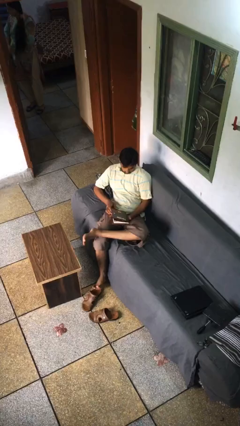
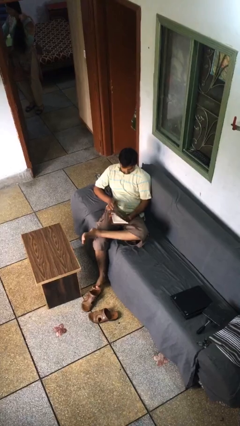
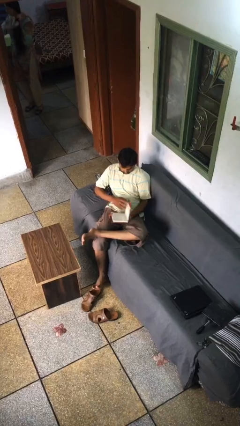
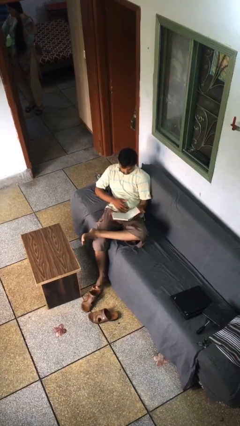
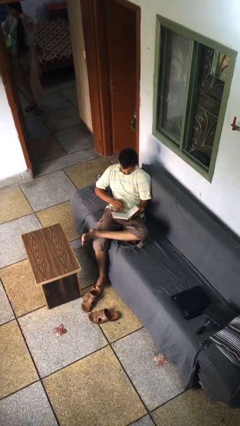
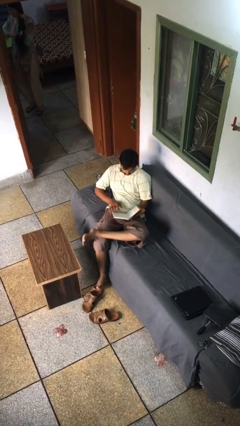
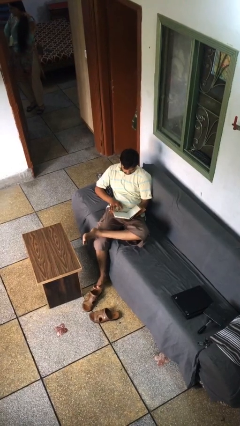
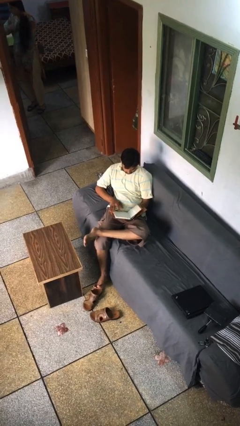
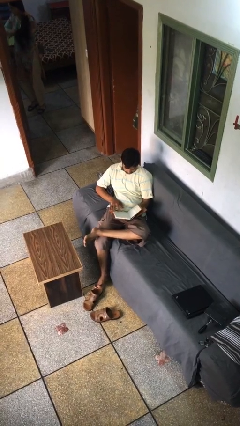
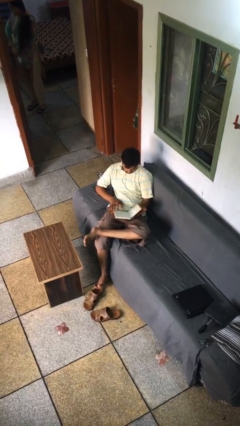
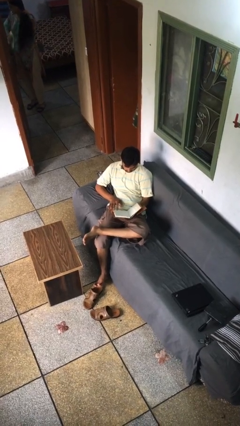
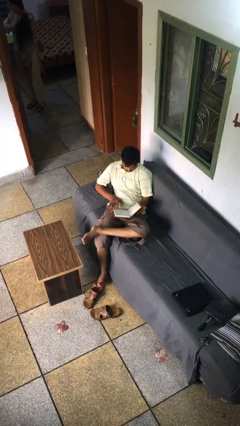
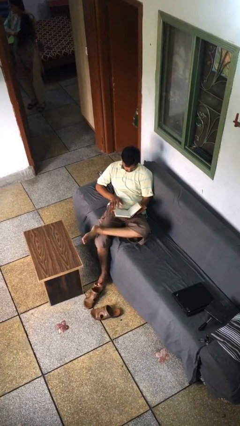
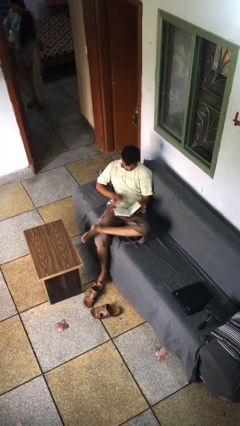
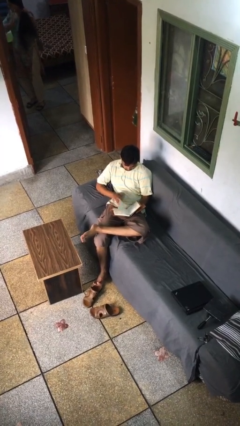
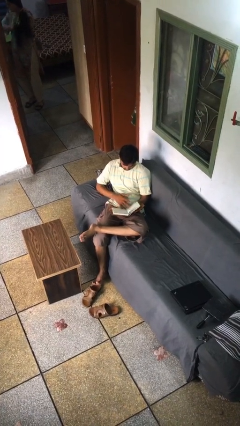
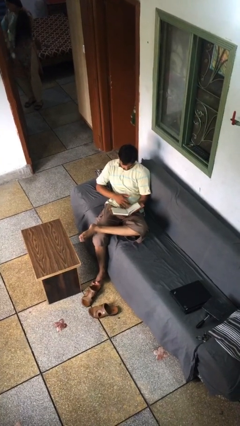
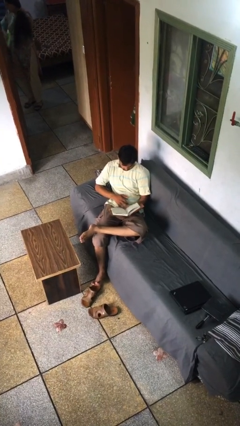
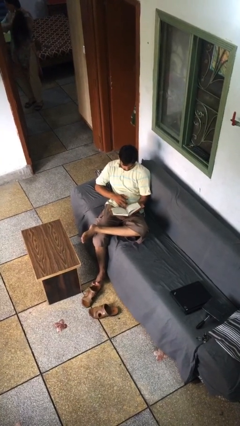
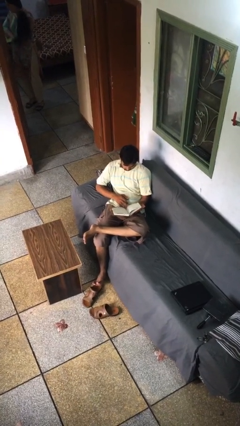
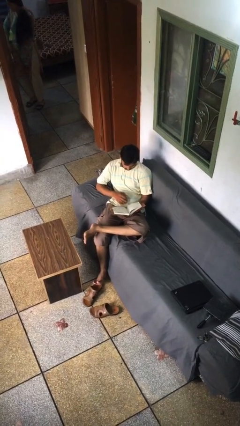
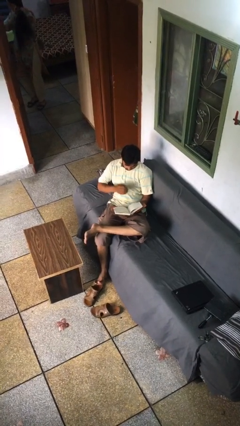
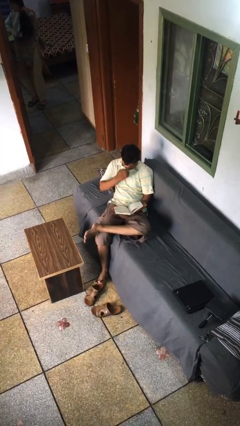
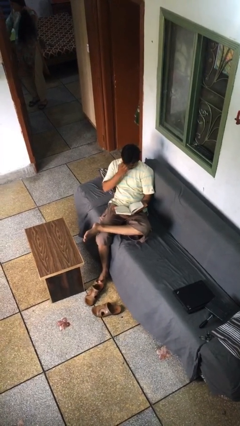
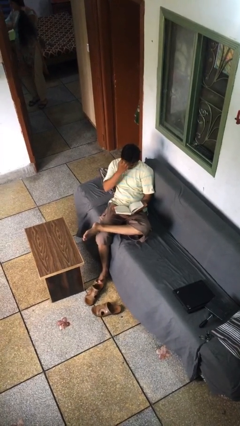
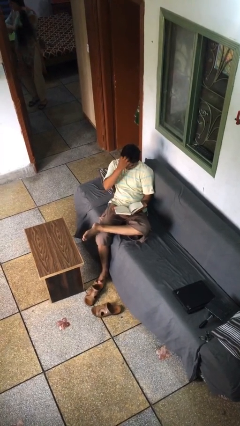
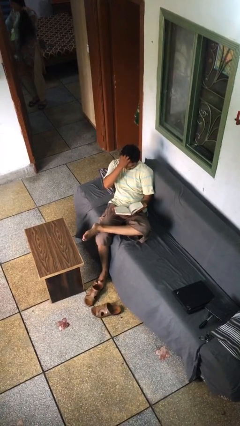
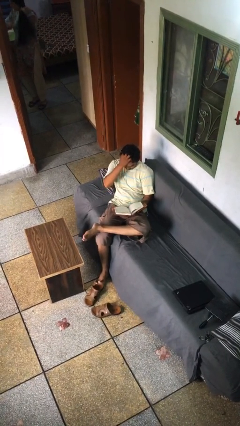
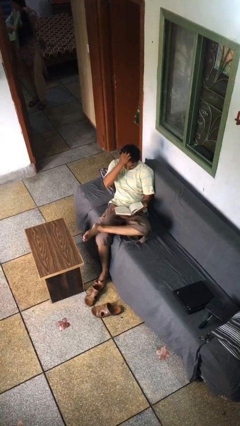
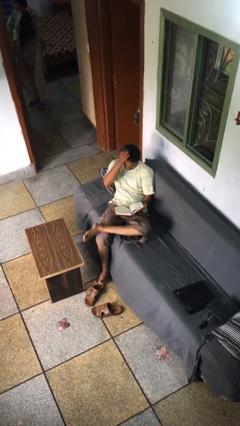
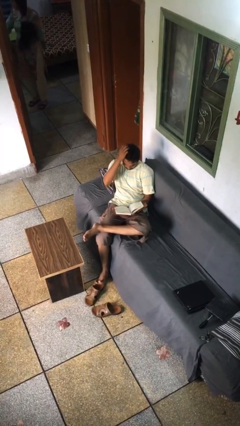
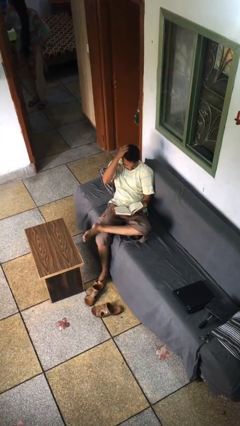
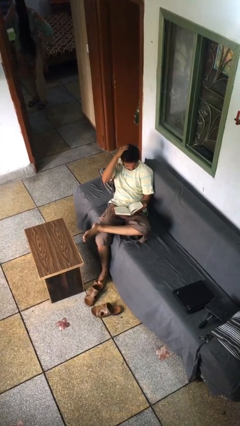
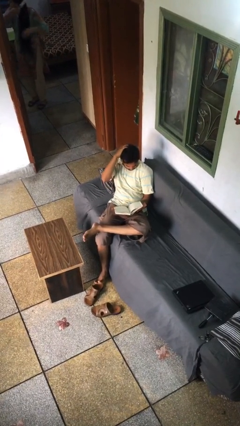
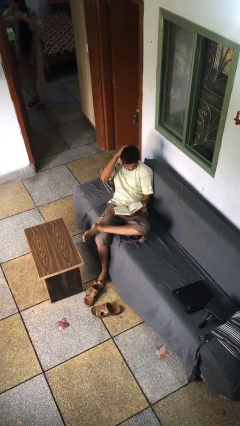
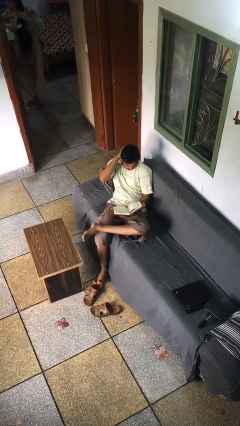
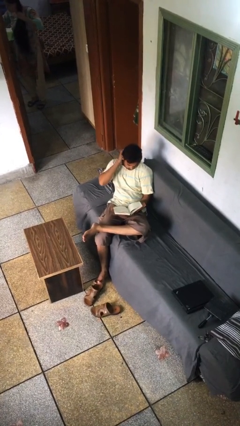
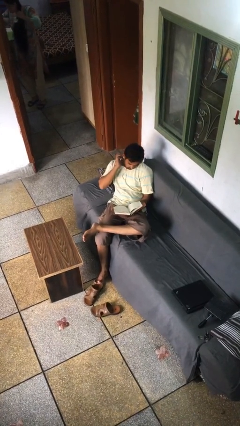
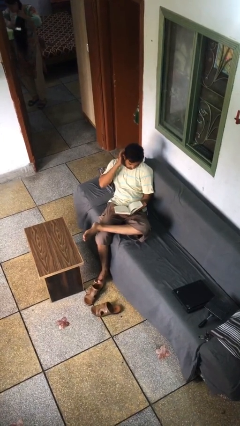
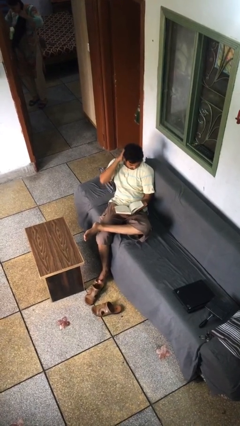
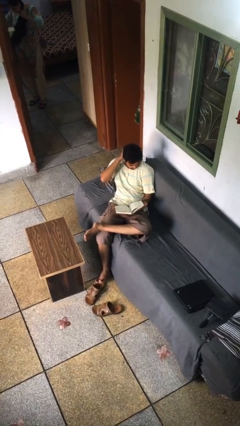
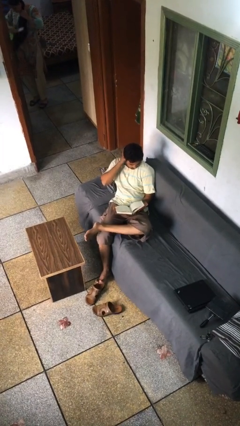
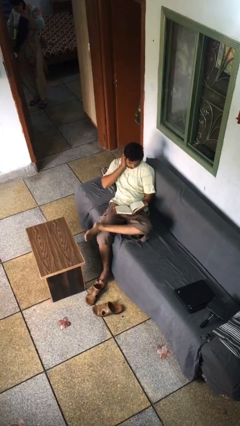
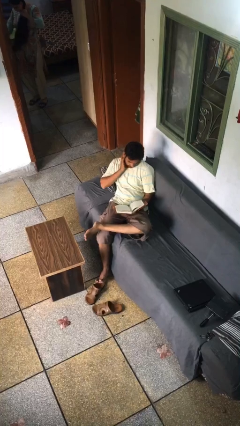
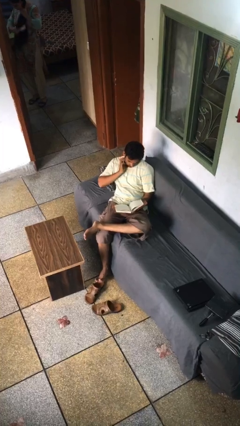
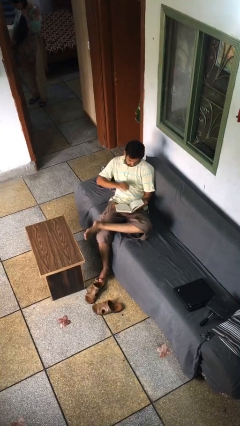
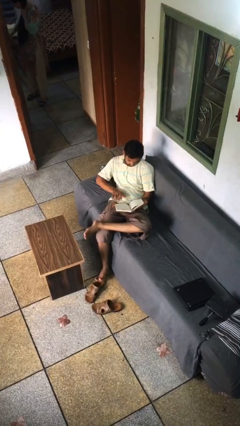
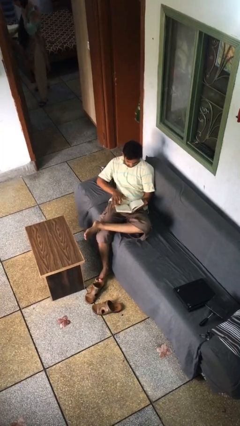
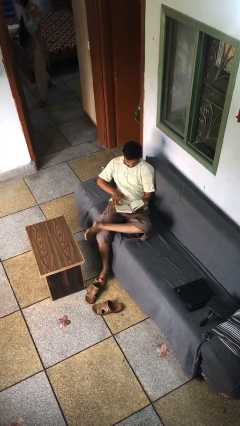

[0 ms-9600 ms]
person reads document

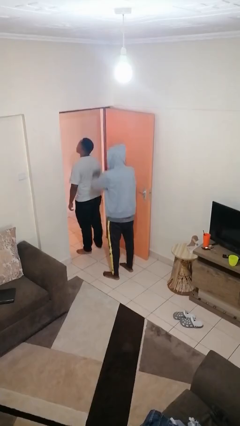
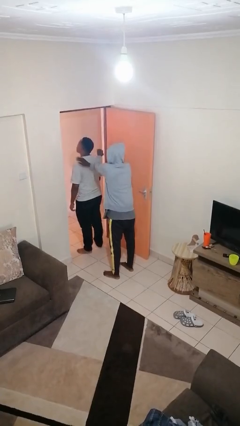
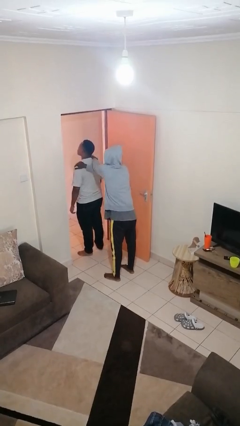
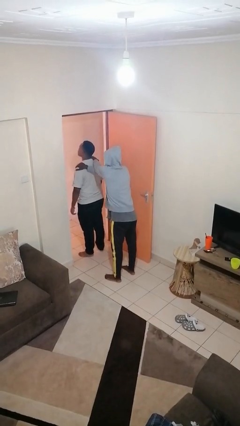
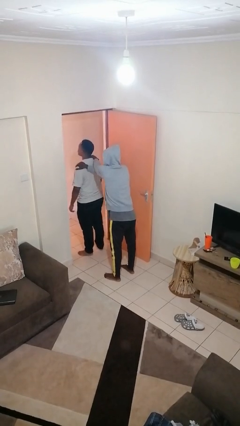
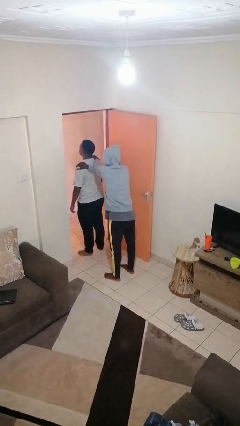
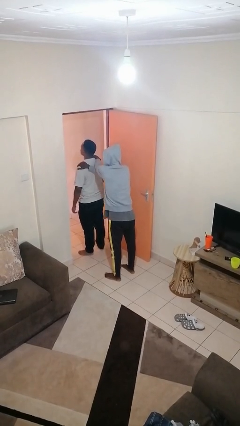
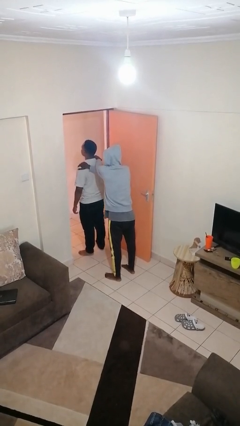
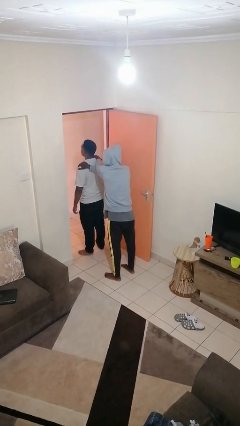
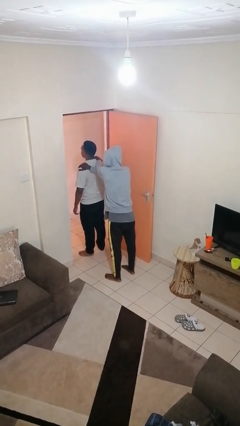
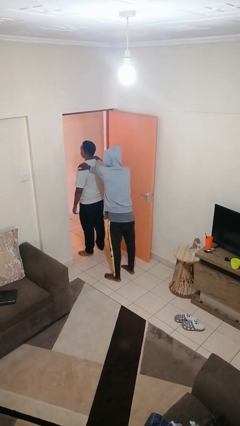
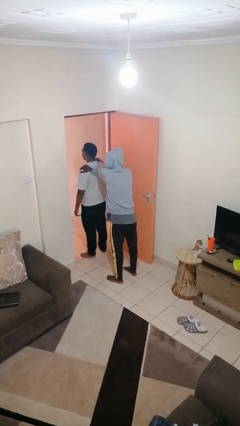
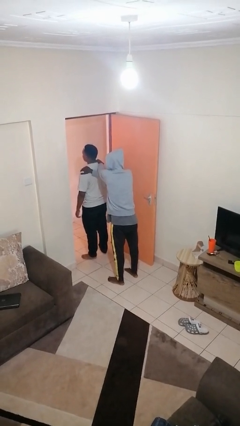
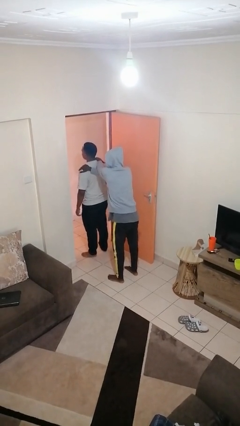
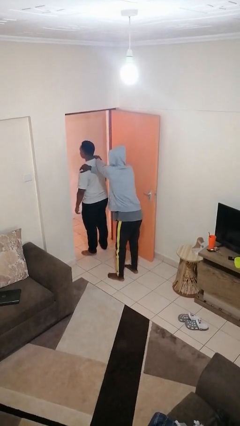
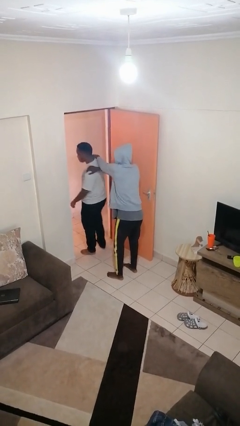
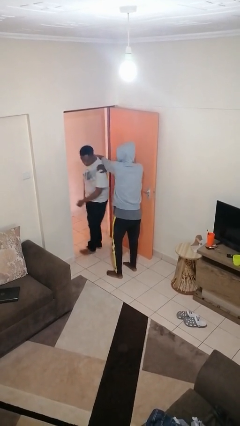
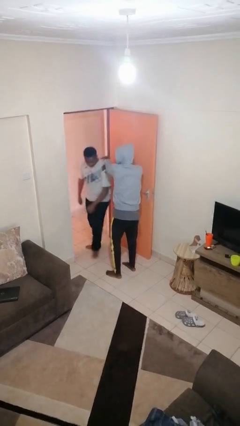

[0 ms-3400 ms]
person grabs person by shoulder

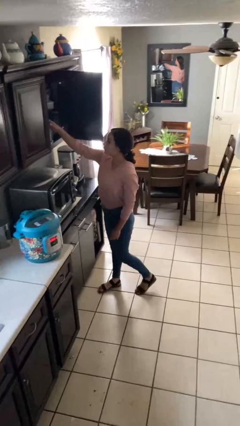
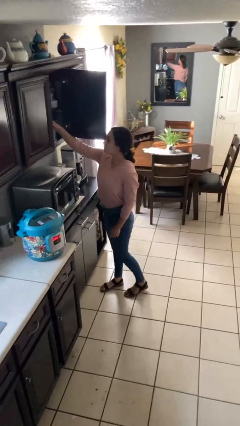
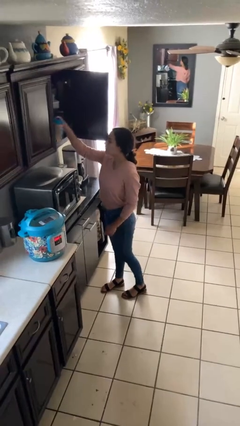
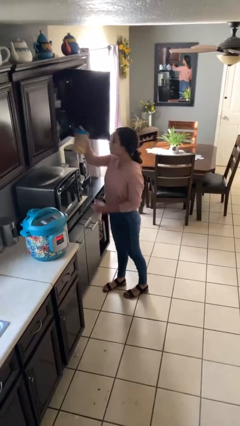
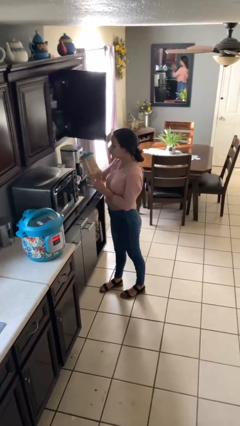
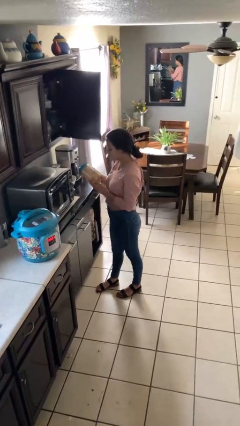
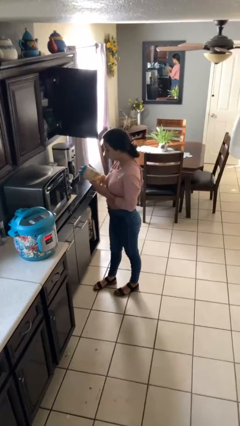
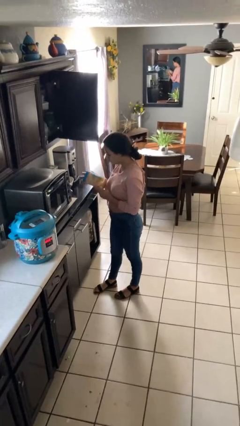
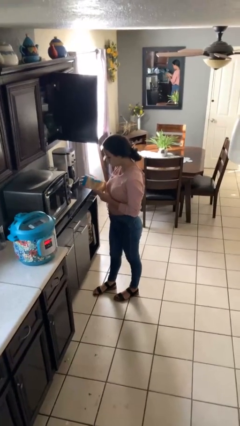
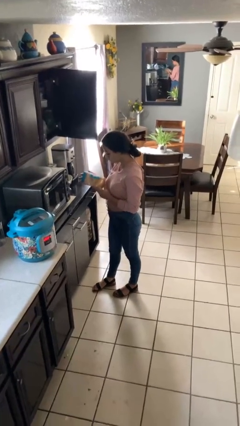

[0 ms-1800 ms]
person picks up object from cabinet

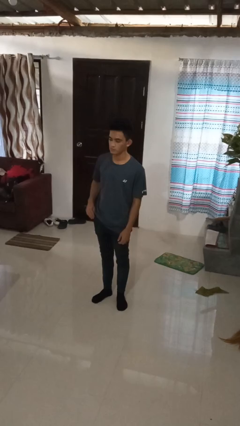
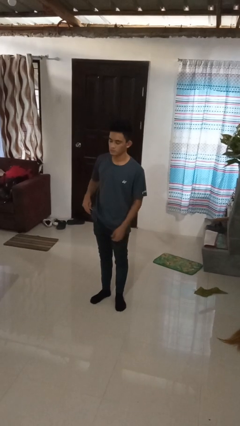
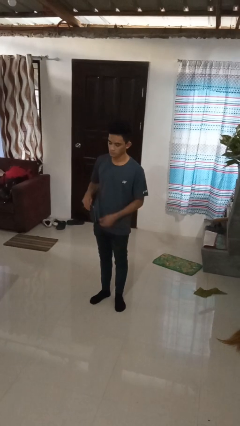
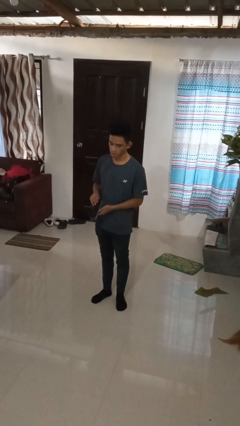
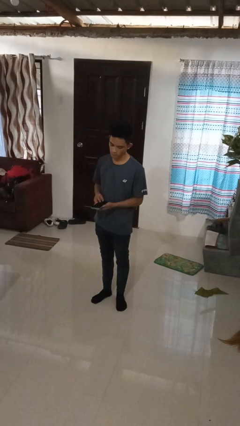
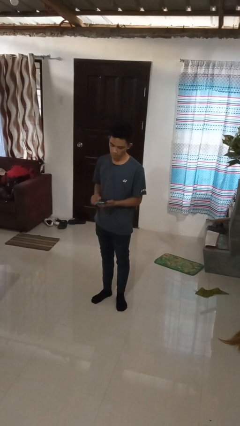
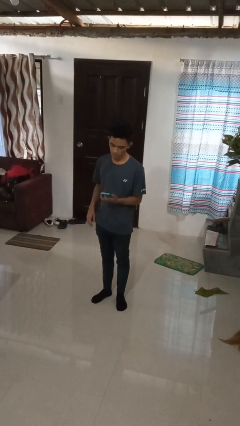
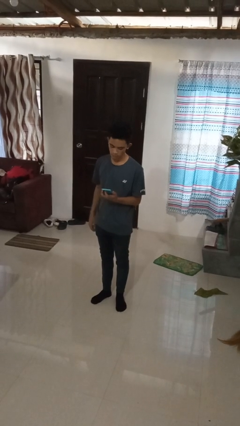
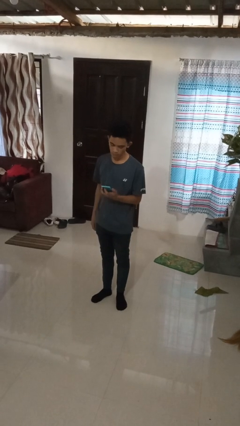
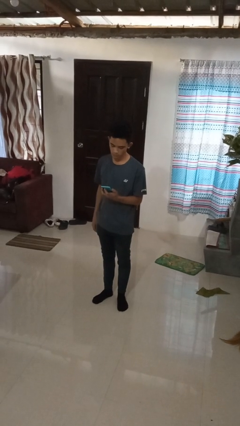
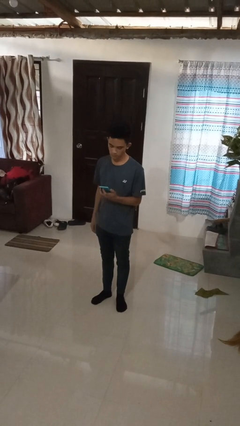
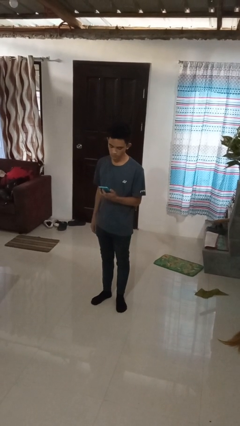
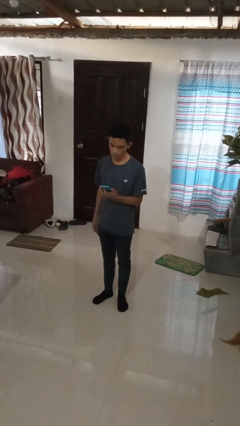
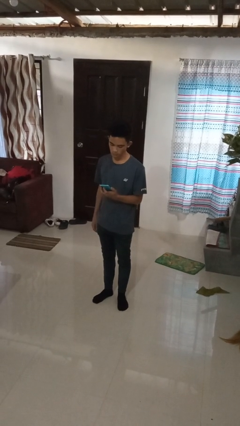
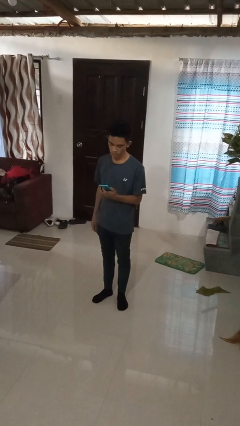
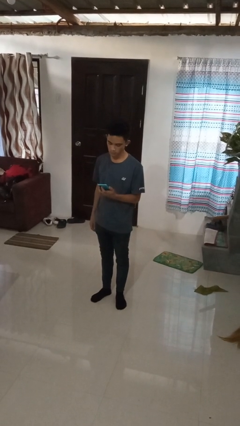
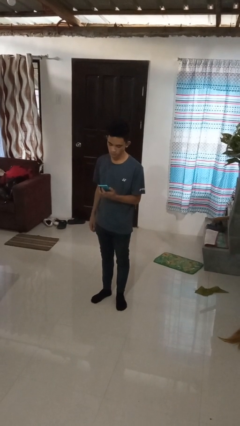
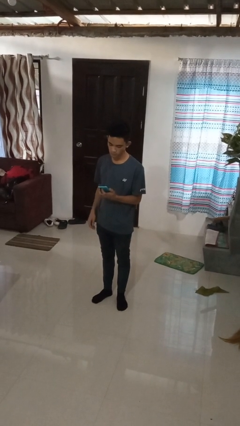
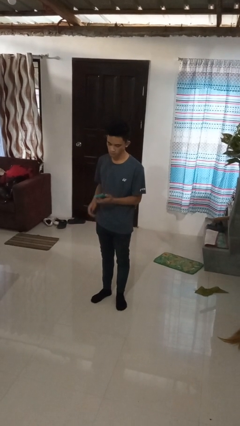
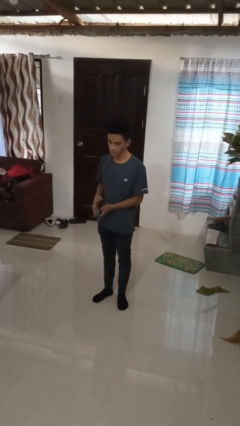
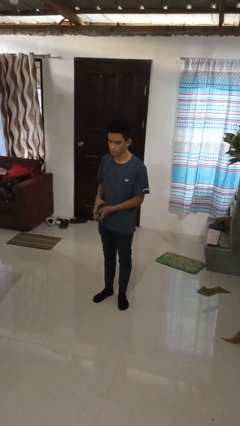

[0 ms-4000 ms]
person takes phone from pocket
